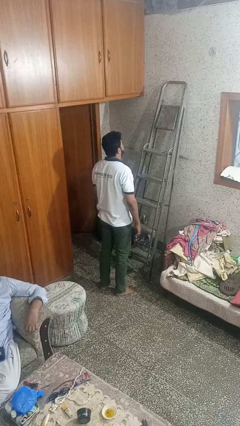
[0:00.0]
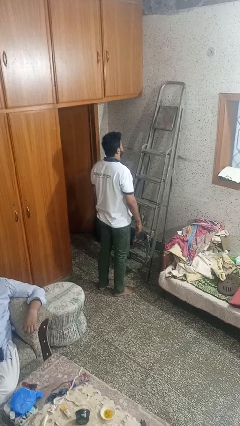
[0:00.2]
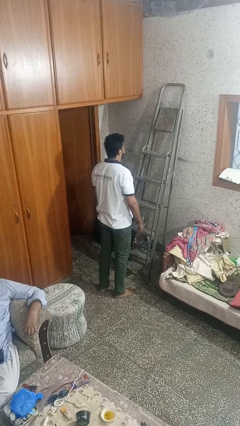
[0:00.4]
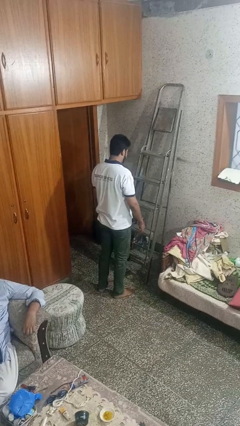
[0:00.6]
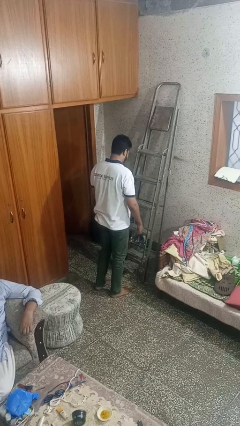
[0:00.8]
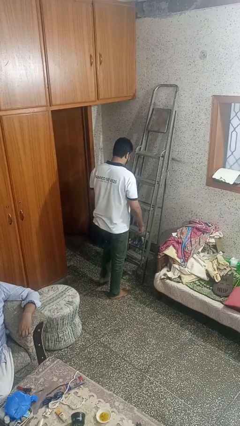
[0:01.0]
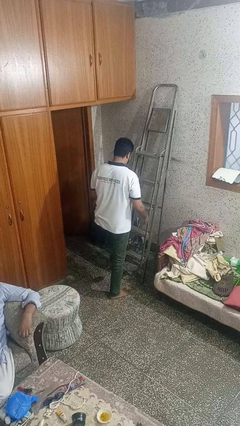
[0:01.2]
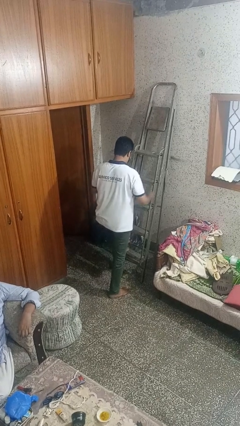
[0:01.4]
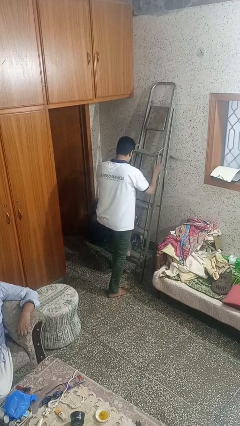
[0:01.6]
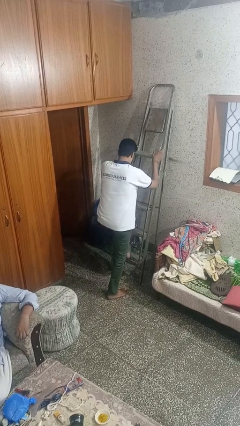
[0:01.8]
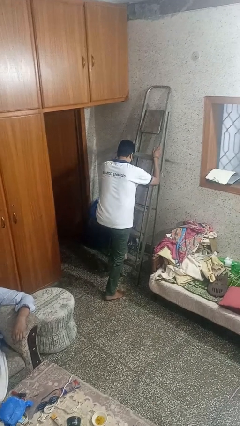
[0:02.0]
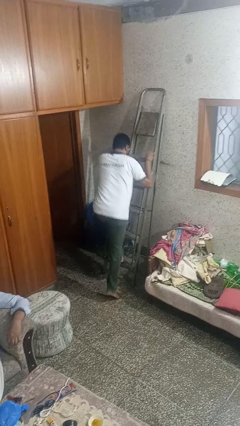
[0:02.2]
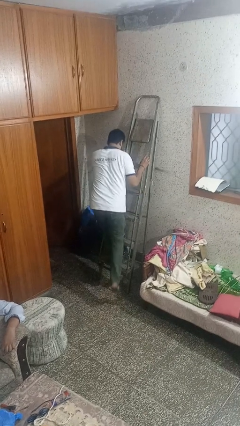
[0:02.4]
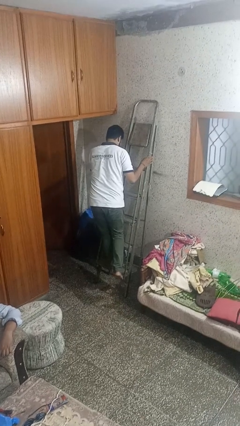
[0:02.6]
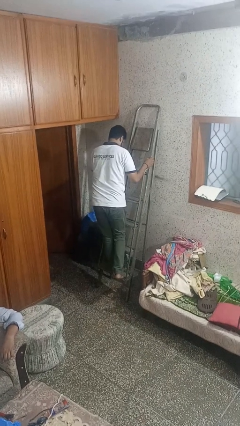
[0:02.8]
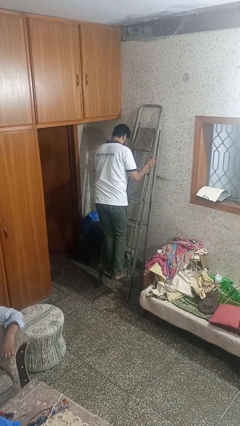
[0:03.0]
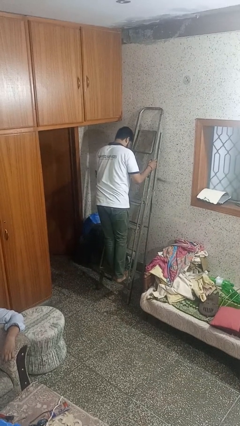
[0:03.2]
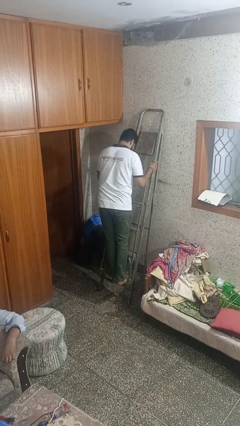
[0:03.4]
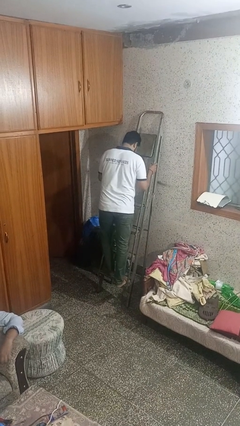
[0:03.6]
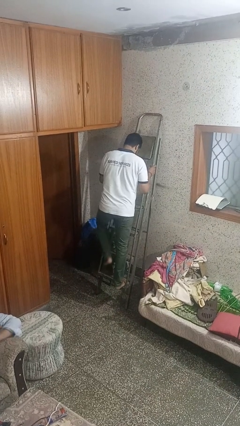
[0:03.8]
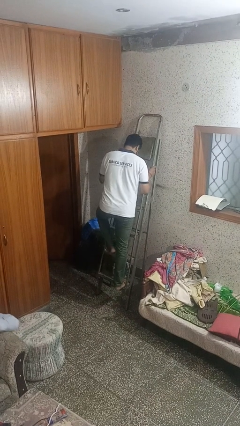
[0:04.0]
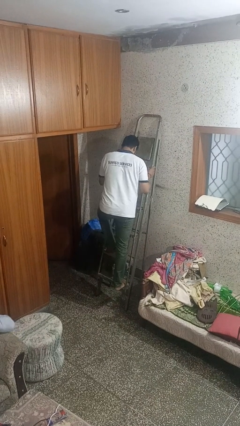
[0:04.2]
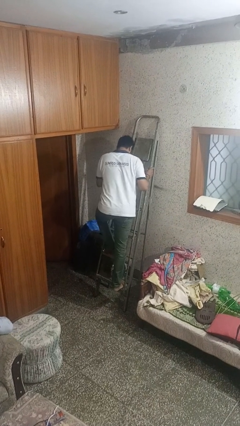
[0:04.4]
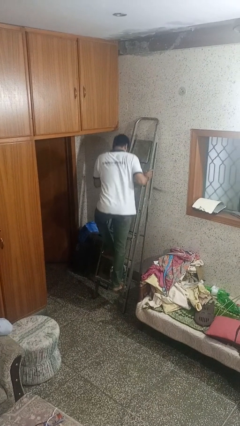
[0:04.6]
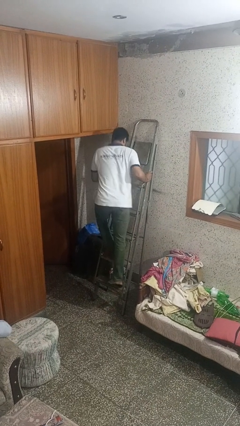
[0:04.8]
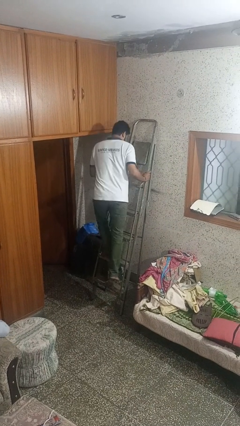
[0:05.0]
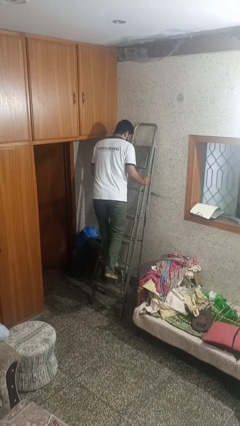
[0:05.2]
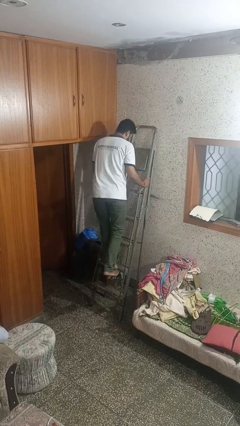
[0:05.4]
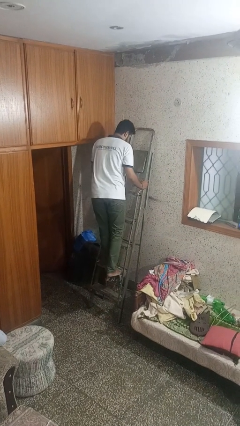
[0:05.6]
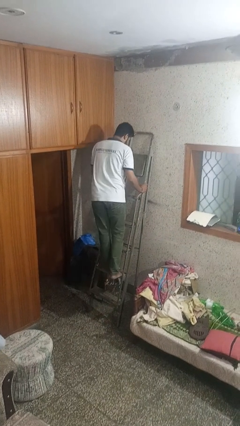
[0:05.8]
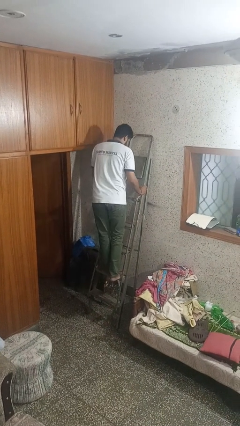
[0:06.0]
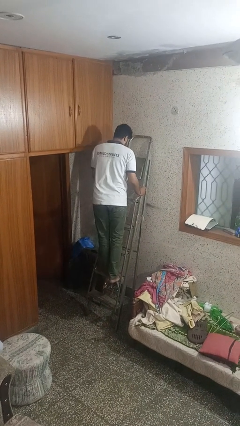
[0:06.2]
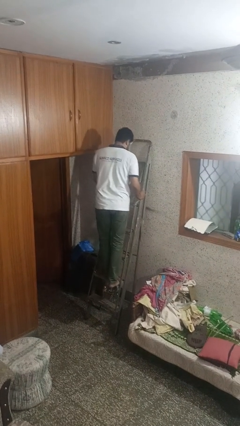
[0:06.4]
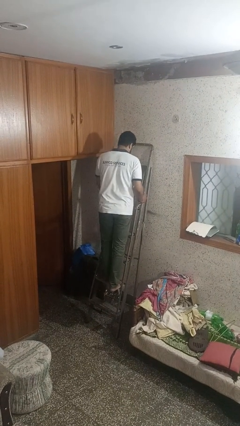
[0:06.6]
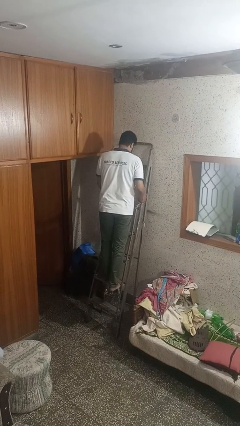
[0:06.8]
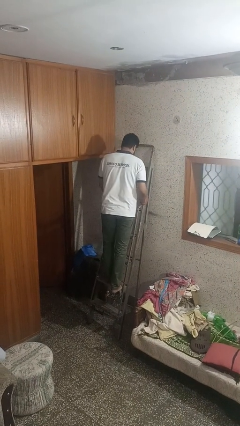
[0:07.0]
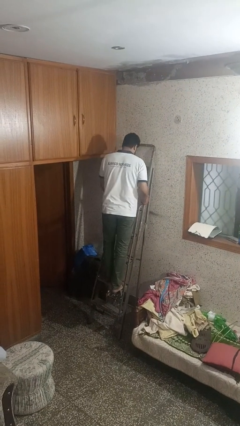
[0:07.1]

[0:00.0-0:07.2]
person climbs up ladder

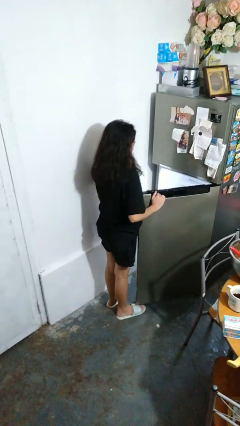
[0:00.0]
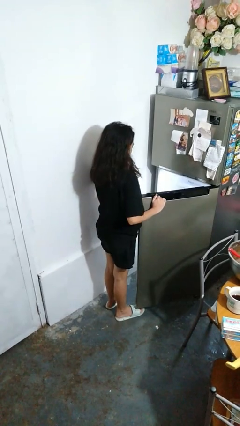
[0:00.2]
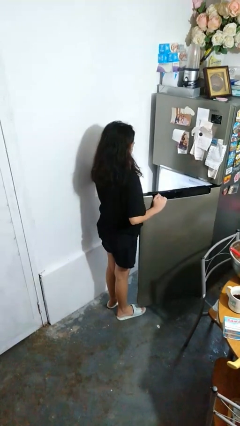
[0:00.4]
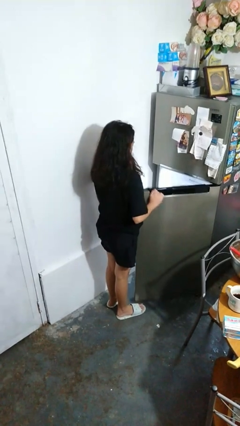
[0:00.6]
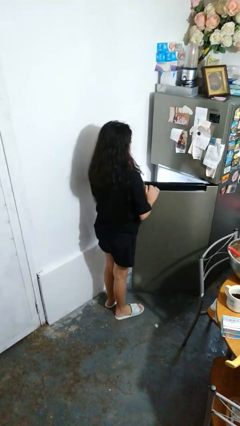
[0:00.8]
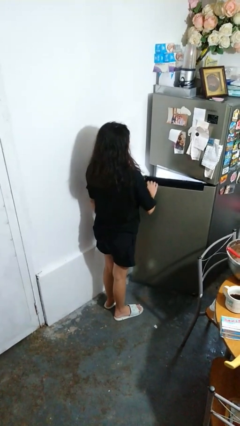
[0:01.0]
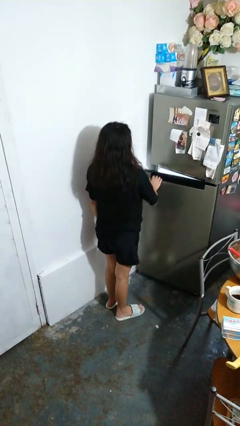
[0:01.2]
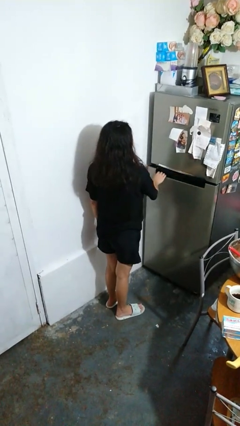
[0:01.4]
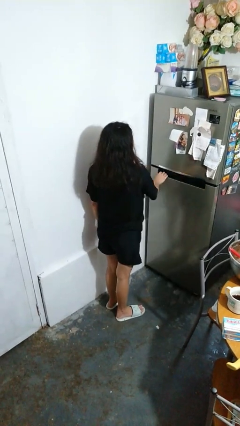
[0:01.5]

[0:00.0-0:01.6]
person closes refrigerator

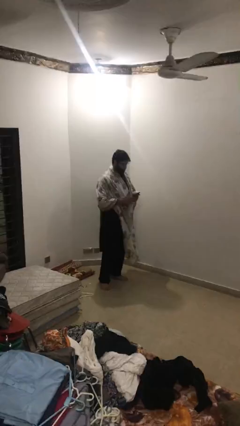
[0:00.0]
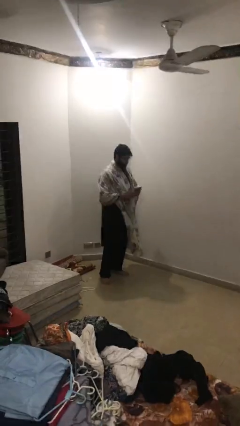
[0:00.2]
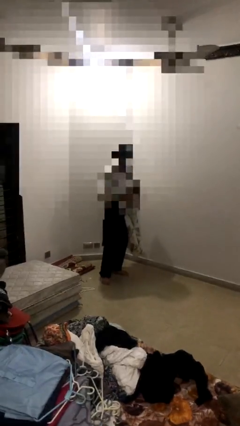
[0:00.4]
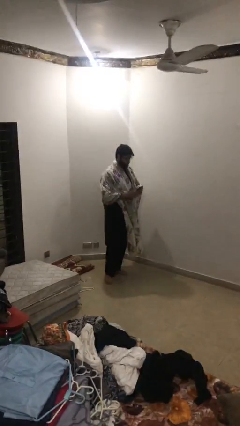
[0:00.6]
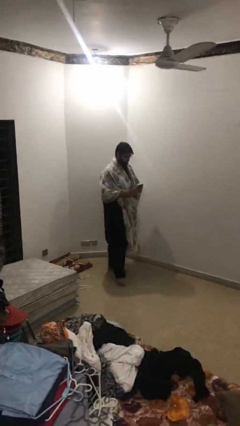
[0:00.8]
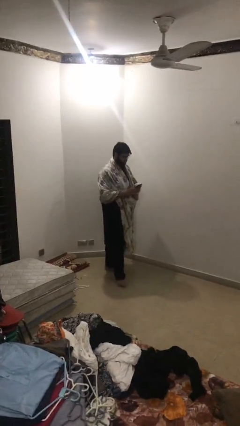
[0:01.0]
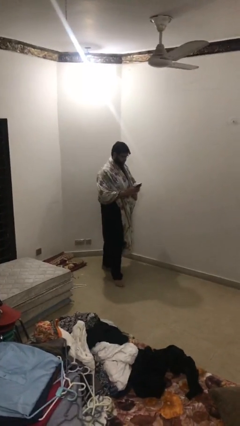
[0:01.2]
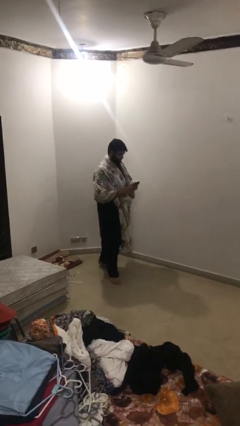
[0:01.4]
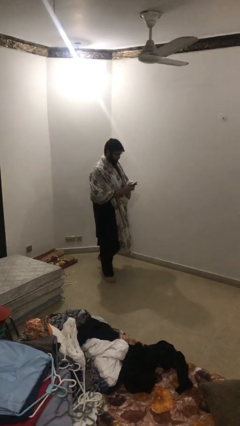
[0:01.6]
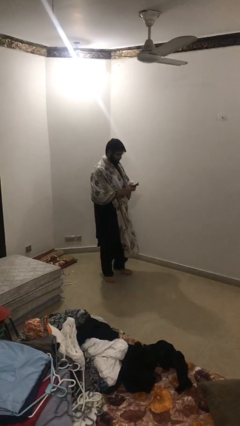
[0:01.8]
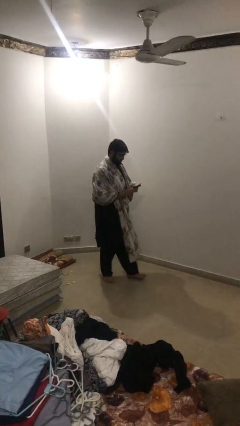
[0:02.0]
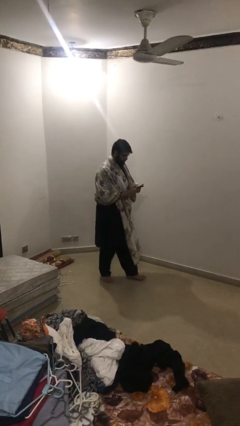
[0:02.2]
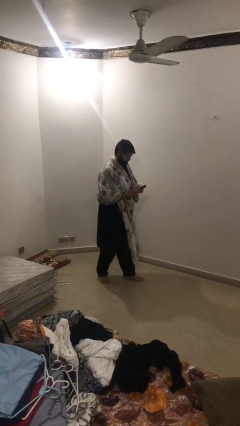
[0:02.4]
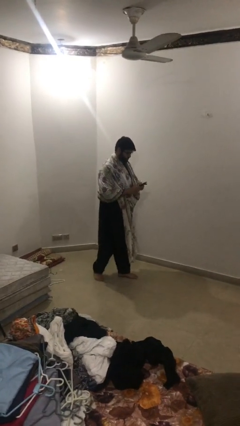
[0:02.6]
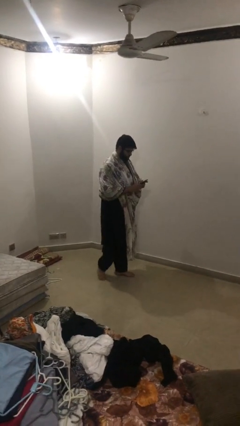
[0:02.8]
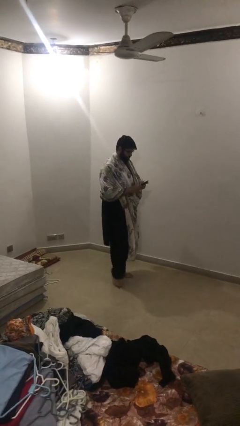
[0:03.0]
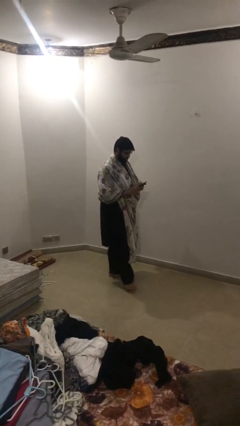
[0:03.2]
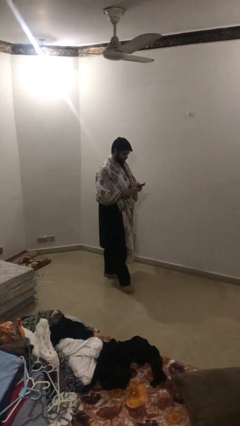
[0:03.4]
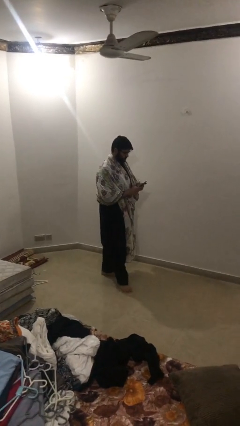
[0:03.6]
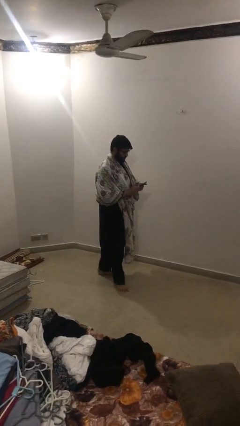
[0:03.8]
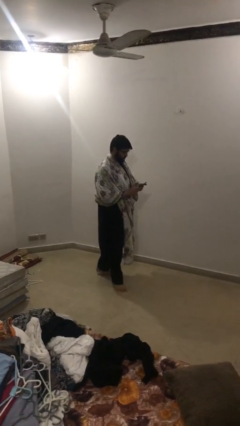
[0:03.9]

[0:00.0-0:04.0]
person texts on phone

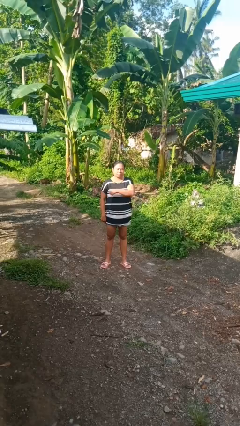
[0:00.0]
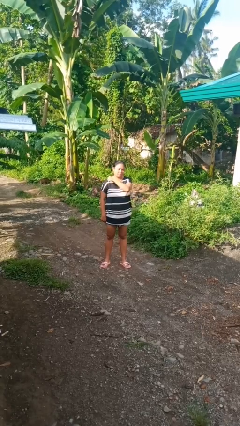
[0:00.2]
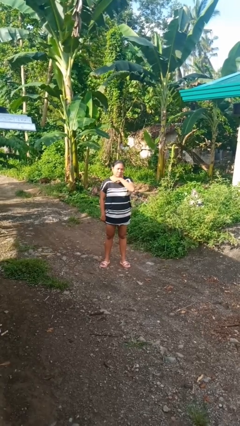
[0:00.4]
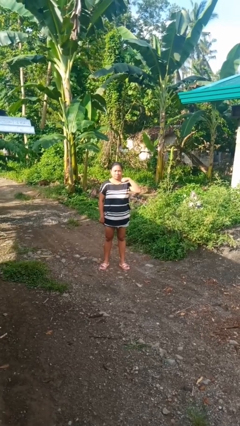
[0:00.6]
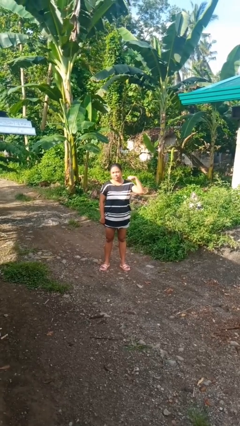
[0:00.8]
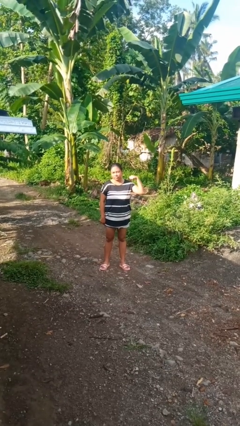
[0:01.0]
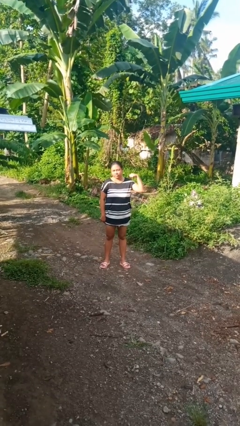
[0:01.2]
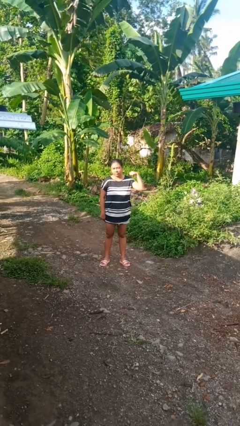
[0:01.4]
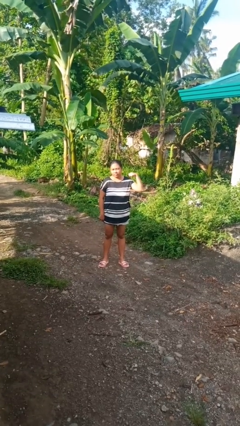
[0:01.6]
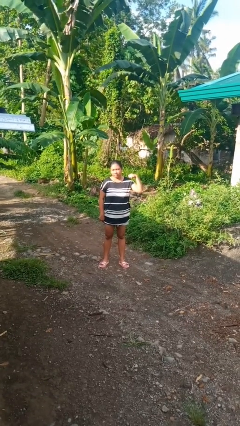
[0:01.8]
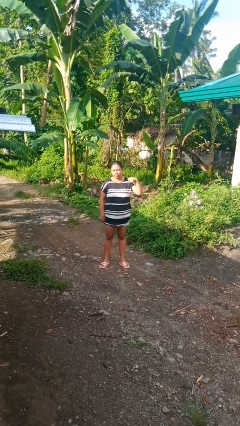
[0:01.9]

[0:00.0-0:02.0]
person gestures cut

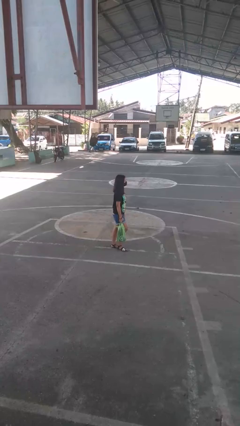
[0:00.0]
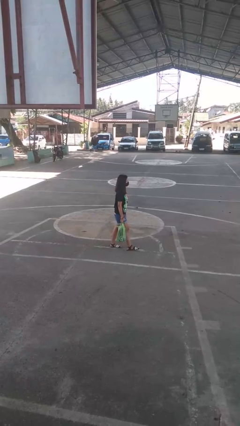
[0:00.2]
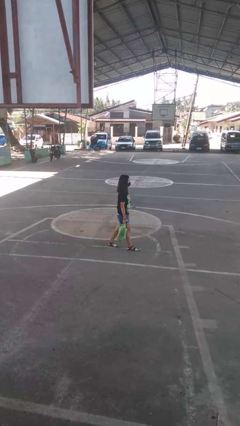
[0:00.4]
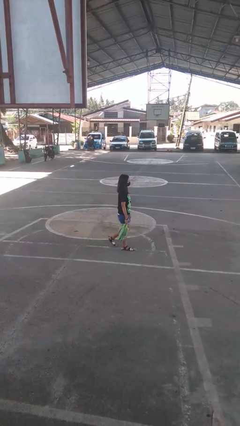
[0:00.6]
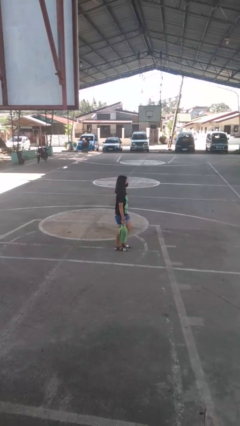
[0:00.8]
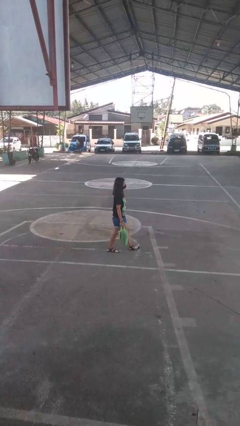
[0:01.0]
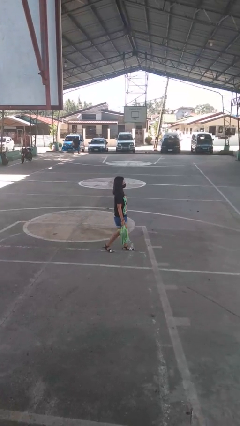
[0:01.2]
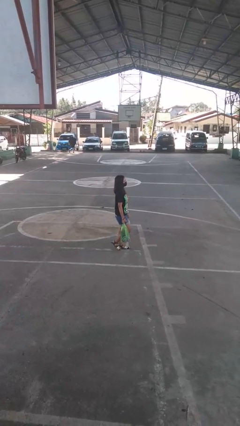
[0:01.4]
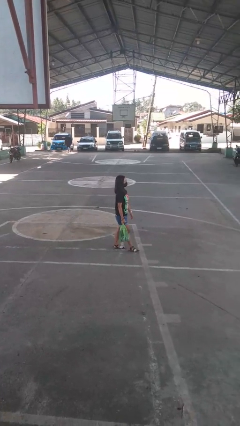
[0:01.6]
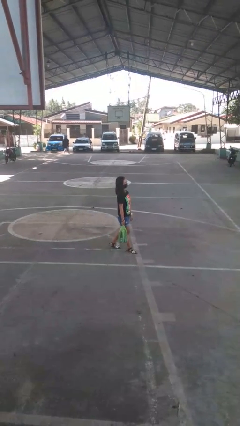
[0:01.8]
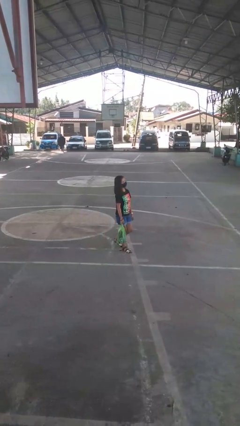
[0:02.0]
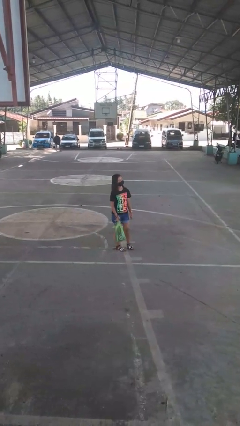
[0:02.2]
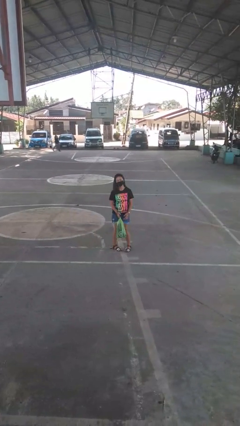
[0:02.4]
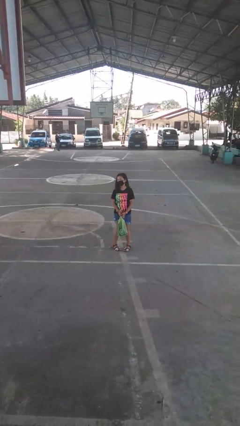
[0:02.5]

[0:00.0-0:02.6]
person carries groceries
